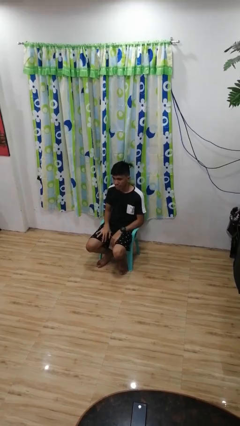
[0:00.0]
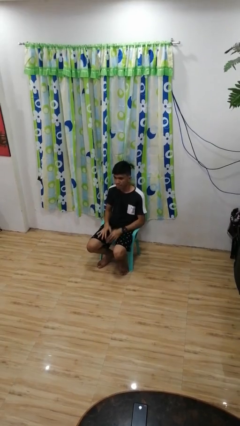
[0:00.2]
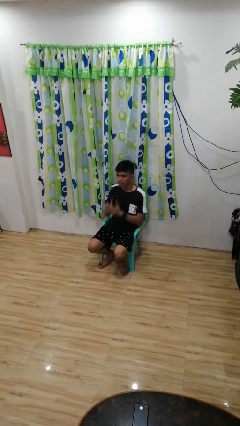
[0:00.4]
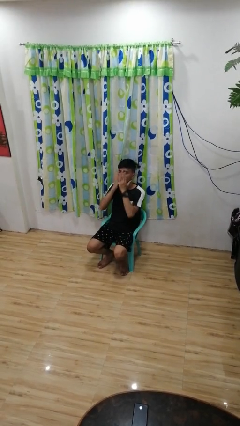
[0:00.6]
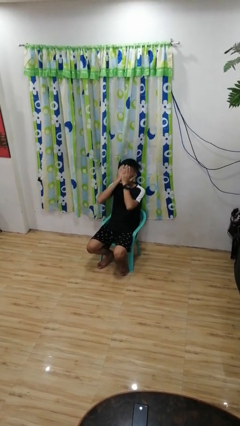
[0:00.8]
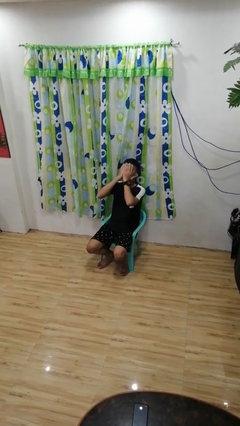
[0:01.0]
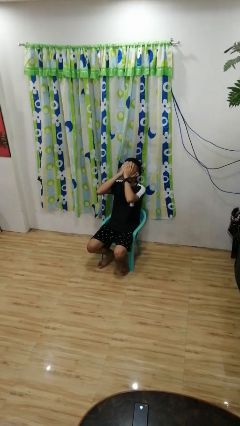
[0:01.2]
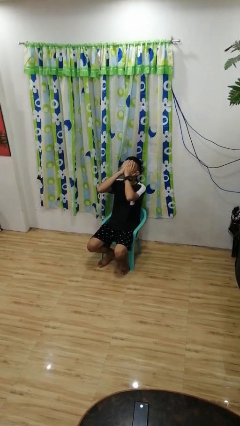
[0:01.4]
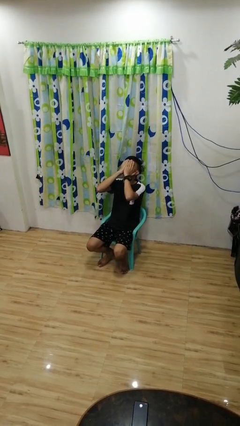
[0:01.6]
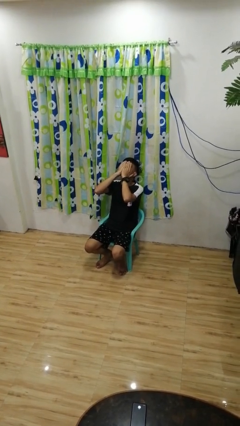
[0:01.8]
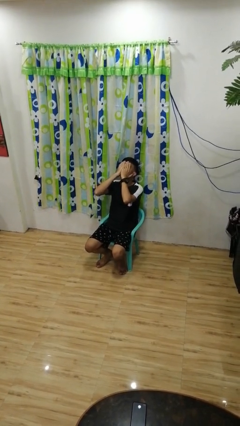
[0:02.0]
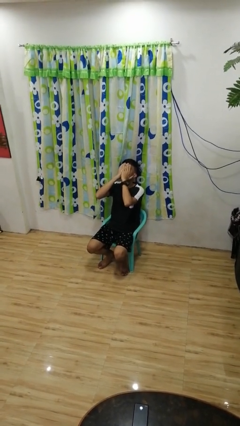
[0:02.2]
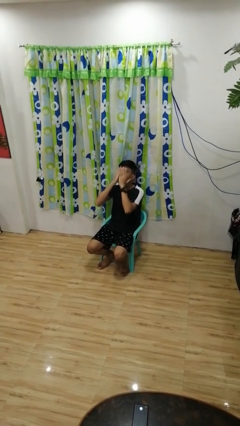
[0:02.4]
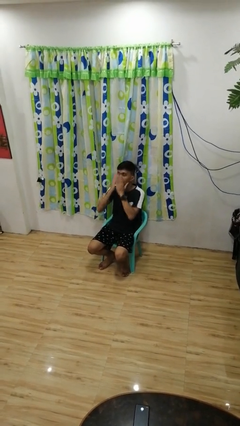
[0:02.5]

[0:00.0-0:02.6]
person covers face with hands

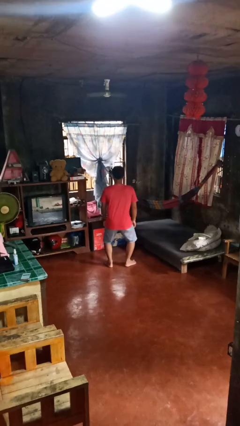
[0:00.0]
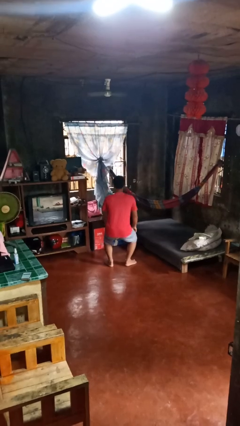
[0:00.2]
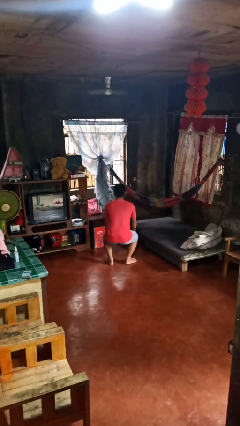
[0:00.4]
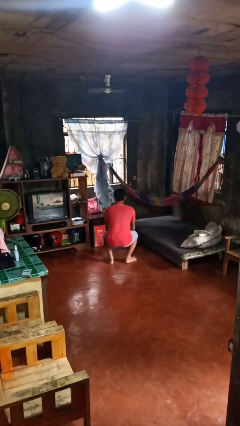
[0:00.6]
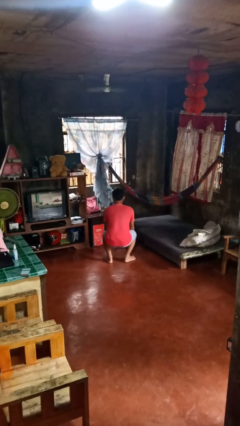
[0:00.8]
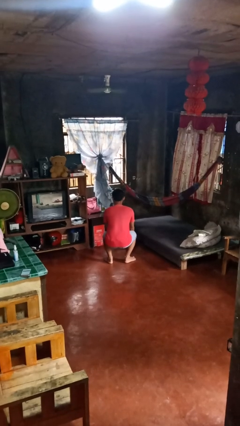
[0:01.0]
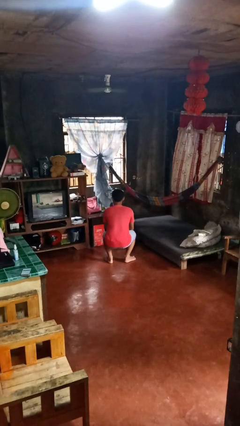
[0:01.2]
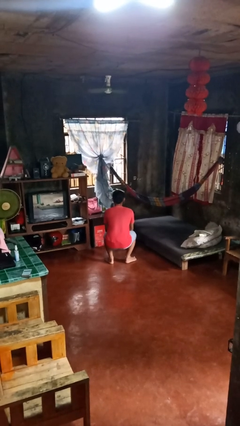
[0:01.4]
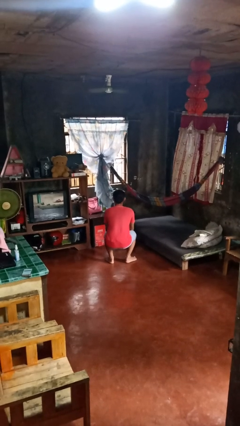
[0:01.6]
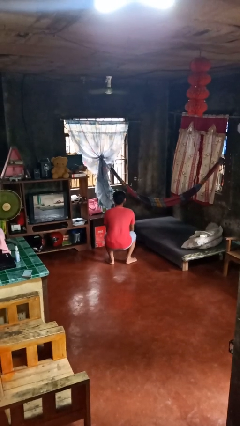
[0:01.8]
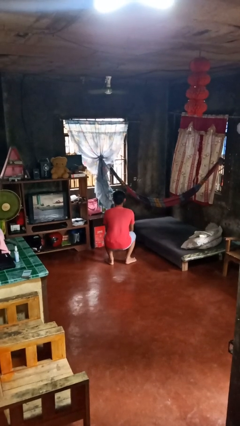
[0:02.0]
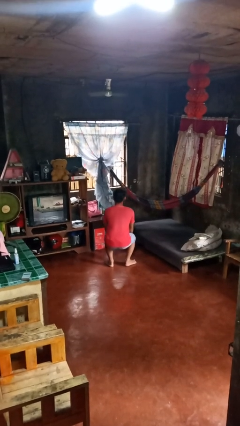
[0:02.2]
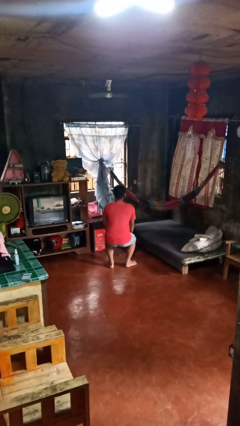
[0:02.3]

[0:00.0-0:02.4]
person squats

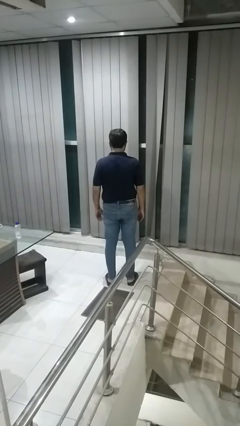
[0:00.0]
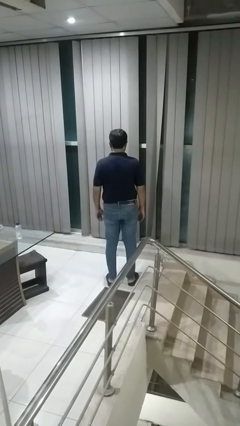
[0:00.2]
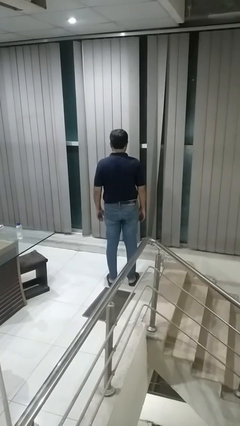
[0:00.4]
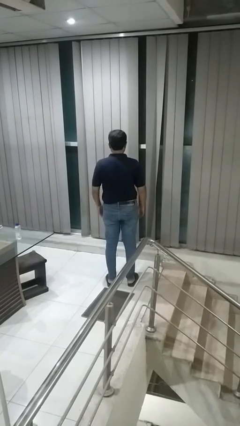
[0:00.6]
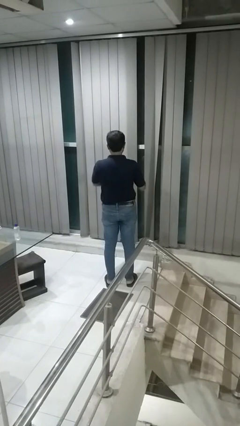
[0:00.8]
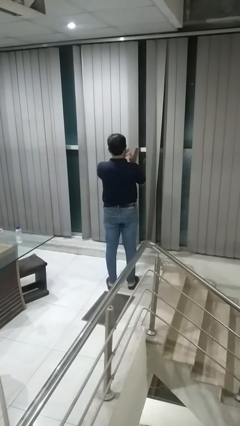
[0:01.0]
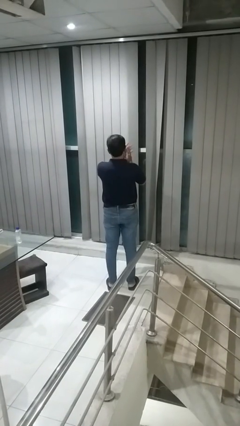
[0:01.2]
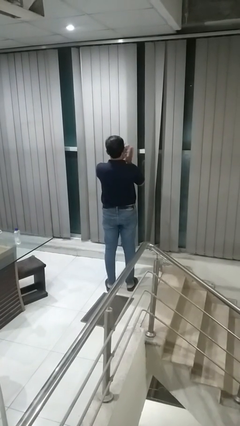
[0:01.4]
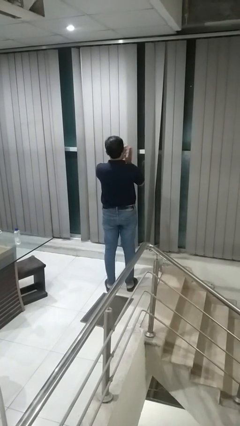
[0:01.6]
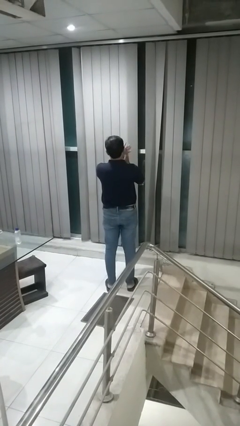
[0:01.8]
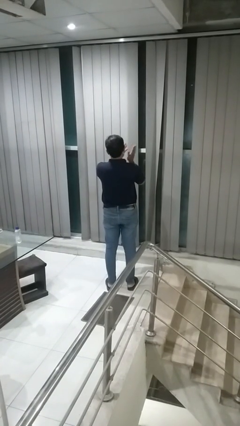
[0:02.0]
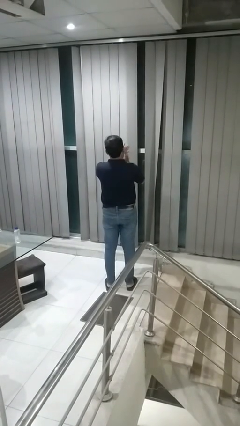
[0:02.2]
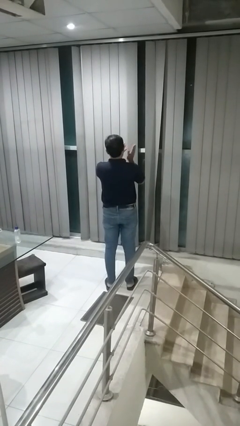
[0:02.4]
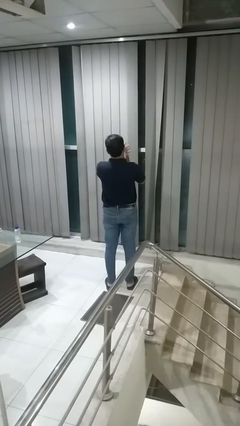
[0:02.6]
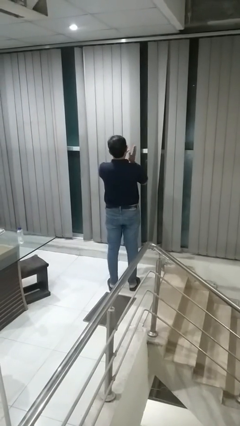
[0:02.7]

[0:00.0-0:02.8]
person claps hands

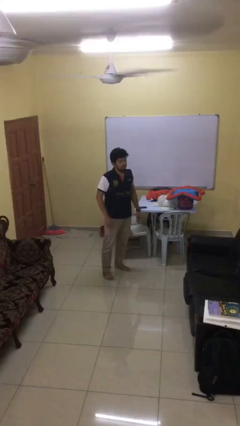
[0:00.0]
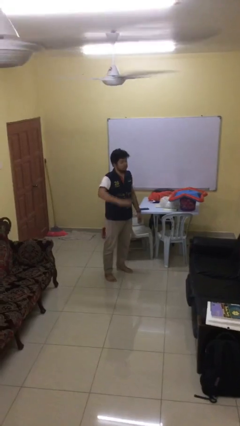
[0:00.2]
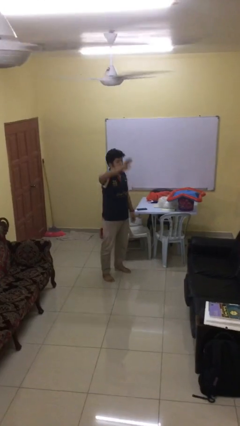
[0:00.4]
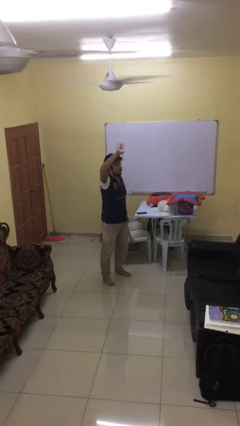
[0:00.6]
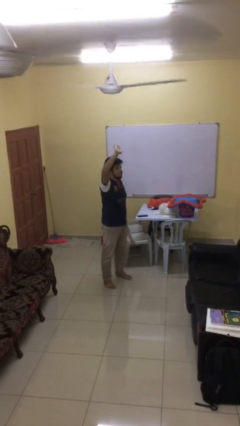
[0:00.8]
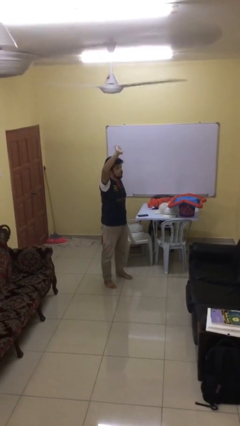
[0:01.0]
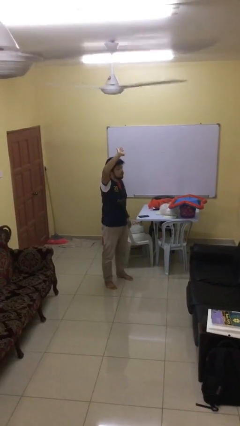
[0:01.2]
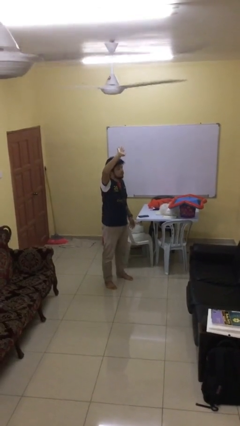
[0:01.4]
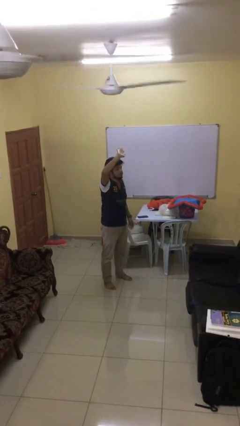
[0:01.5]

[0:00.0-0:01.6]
person gestures raise hand

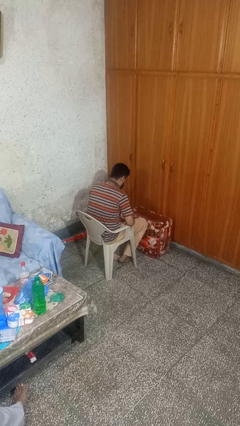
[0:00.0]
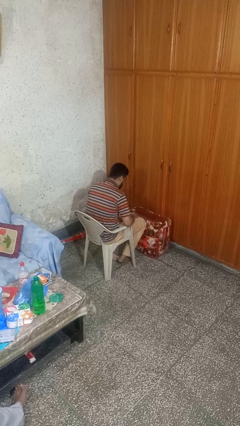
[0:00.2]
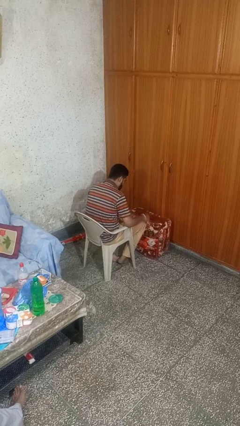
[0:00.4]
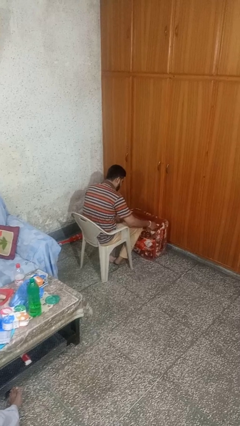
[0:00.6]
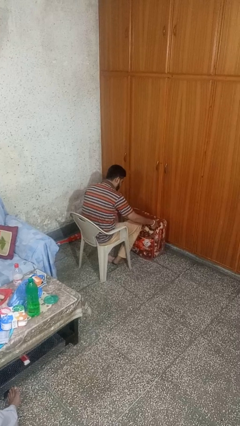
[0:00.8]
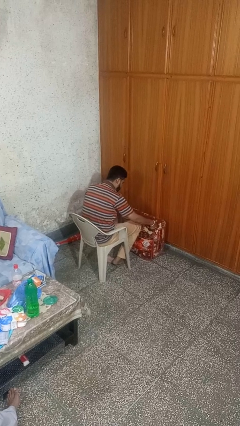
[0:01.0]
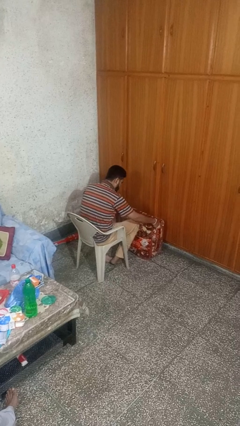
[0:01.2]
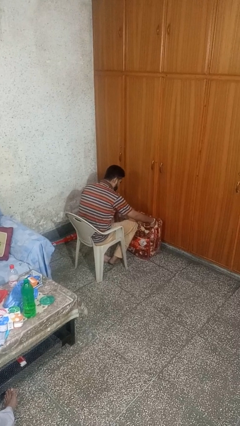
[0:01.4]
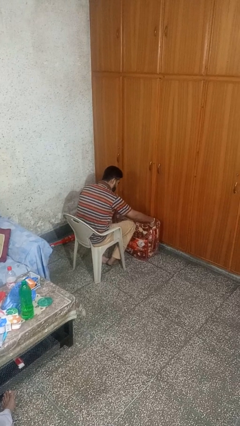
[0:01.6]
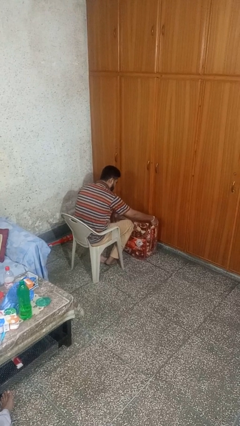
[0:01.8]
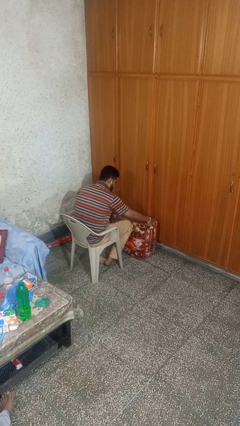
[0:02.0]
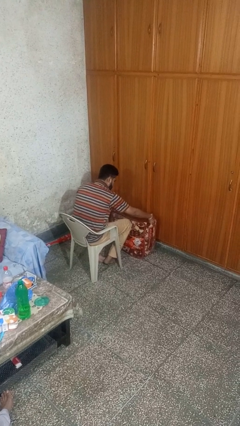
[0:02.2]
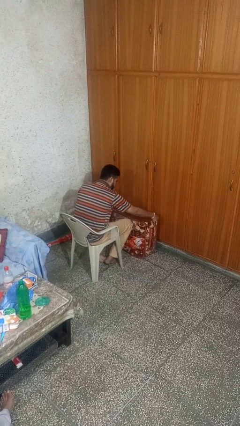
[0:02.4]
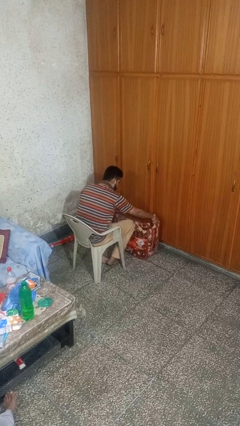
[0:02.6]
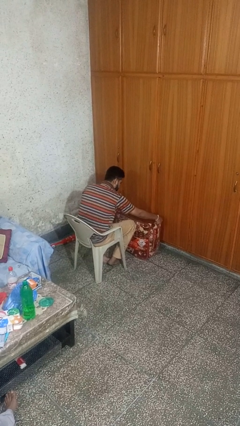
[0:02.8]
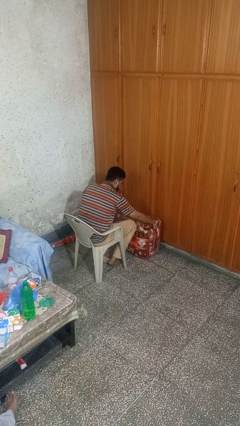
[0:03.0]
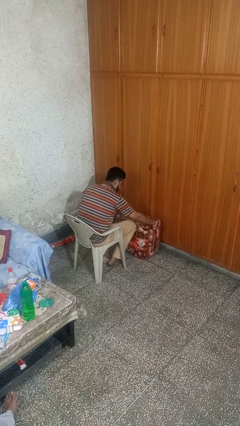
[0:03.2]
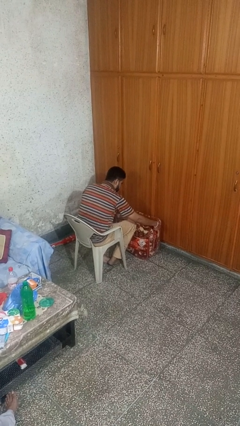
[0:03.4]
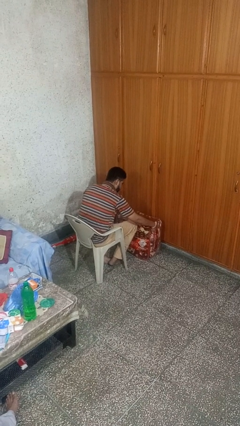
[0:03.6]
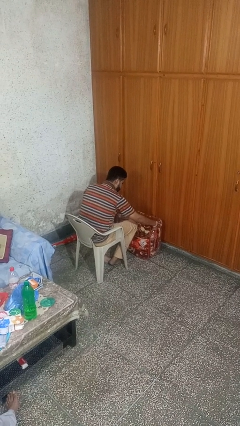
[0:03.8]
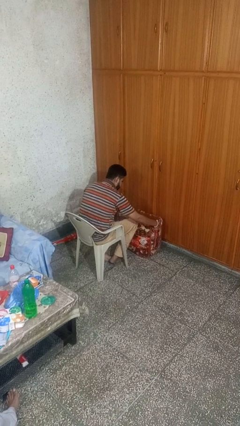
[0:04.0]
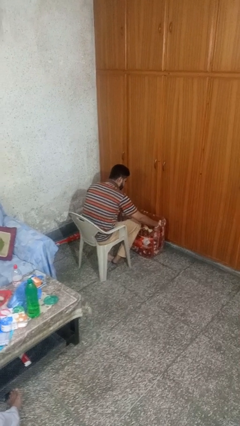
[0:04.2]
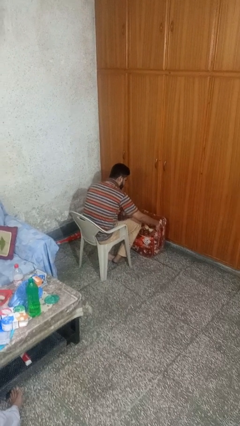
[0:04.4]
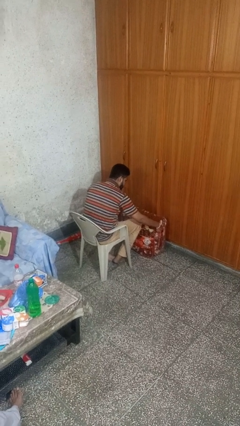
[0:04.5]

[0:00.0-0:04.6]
person taps object with finger

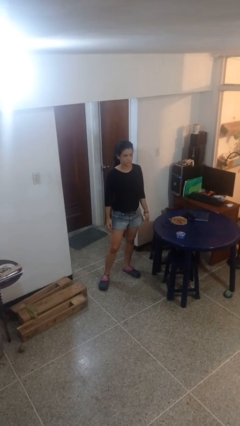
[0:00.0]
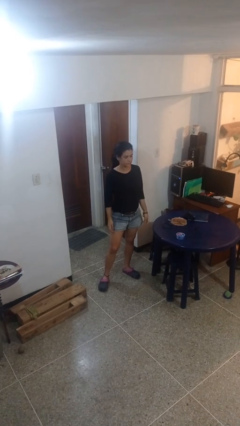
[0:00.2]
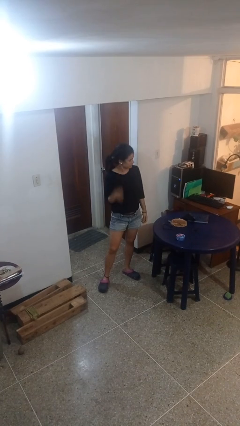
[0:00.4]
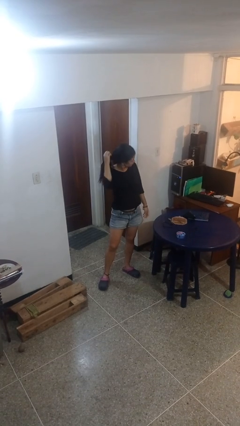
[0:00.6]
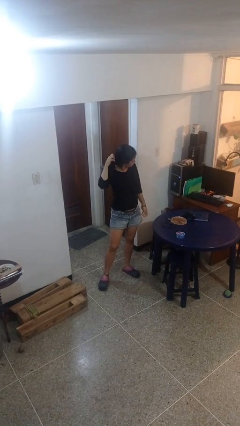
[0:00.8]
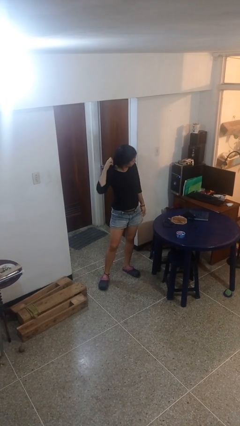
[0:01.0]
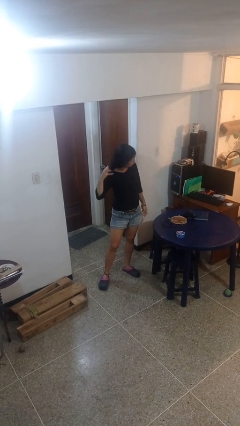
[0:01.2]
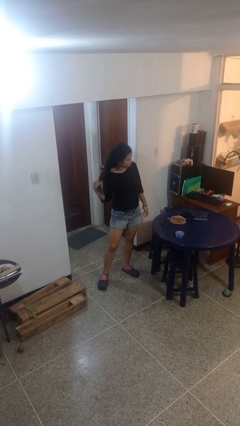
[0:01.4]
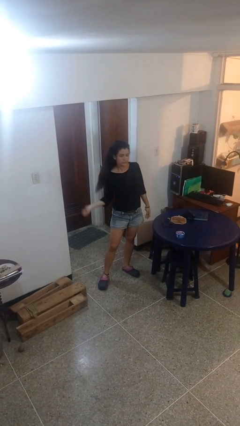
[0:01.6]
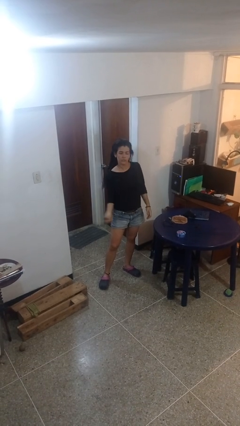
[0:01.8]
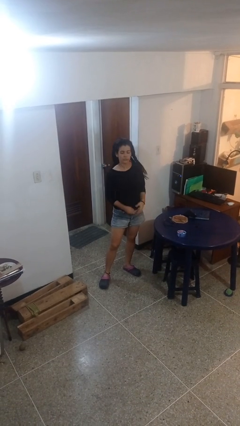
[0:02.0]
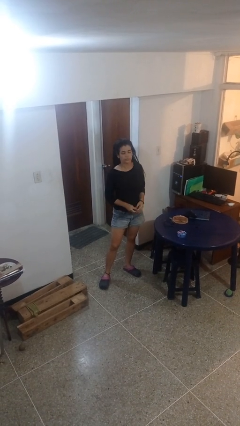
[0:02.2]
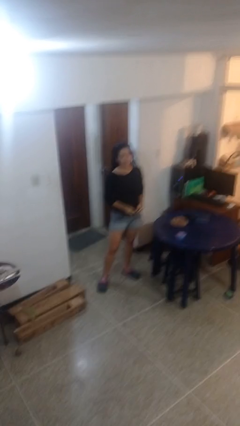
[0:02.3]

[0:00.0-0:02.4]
person takes off hairtie

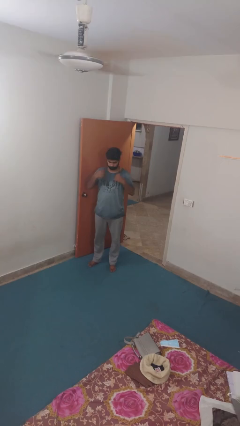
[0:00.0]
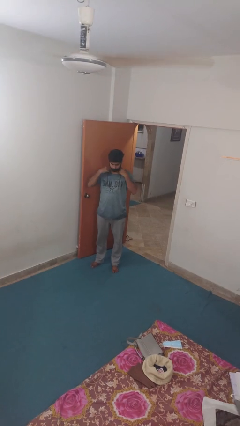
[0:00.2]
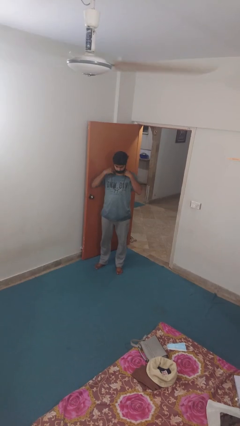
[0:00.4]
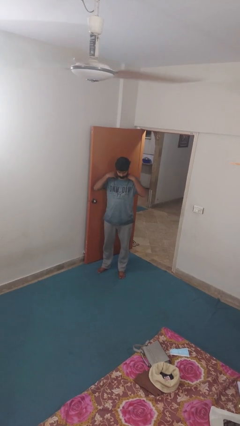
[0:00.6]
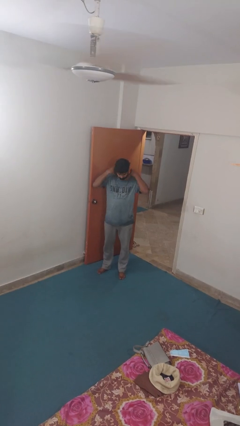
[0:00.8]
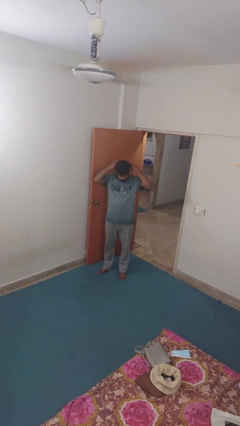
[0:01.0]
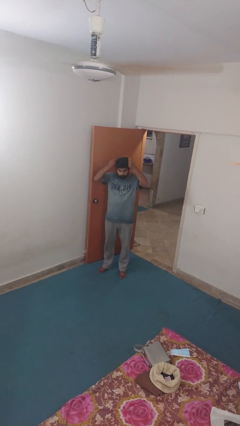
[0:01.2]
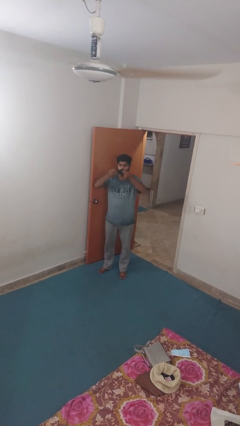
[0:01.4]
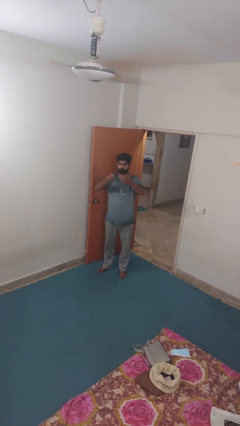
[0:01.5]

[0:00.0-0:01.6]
person takes off necklace
